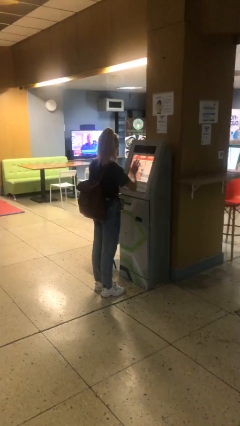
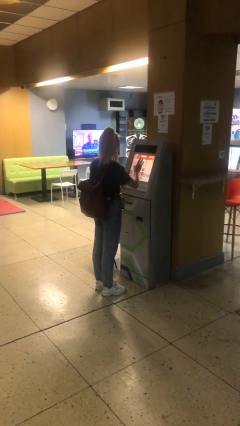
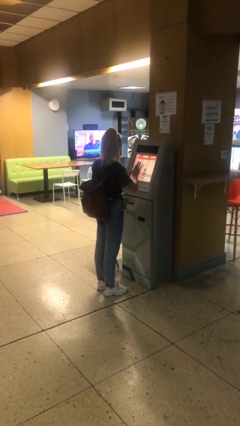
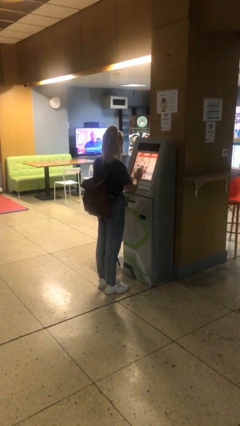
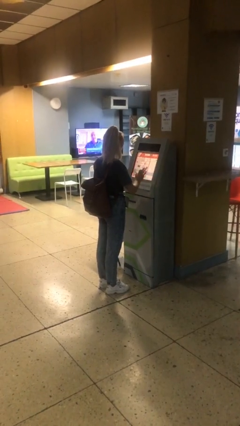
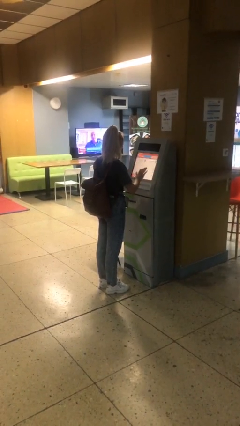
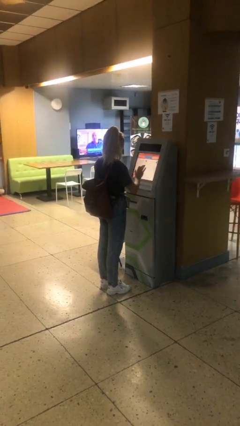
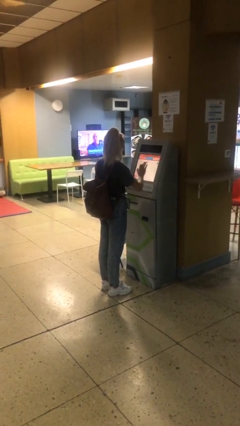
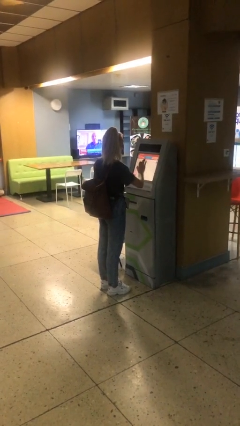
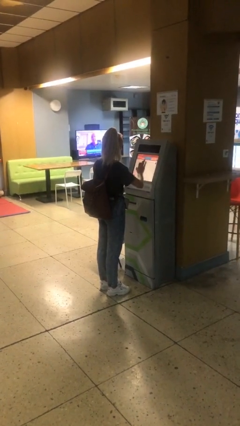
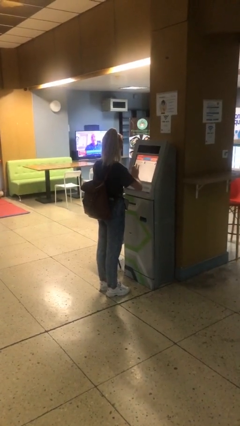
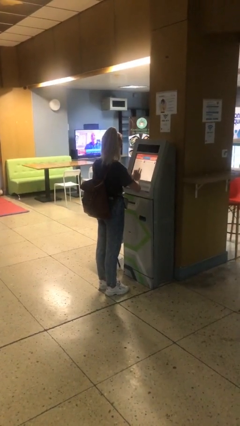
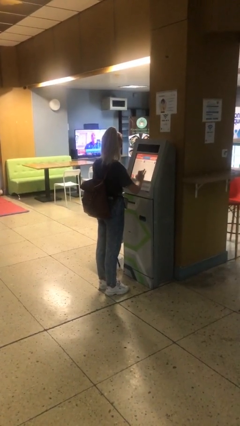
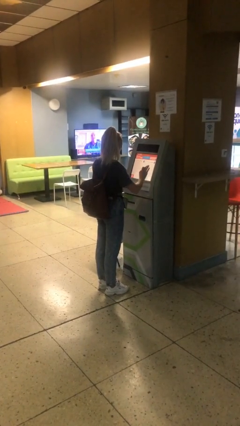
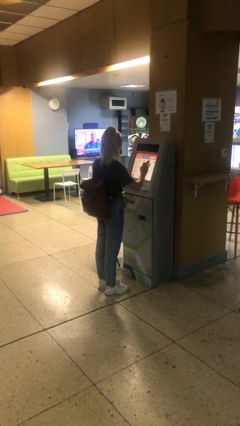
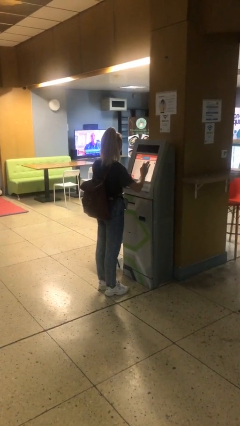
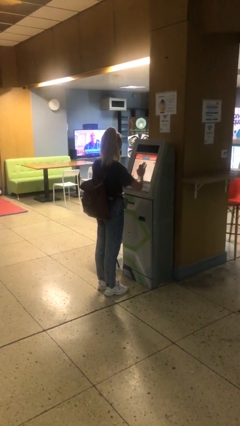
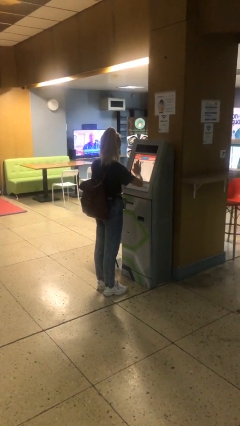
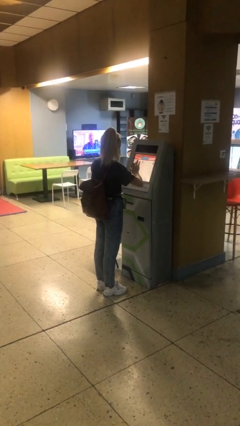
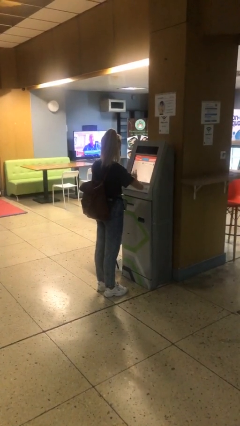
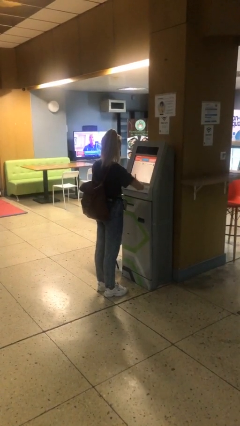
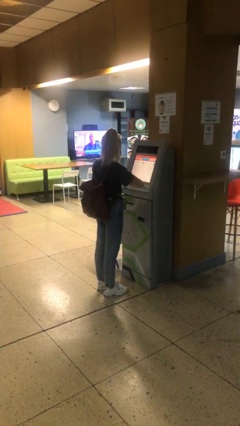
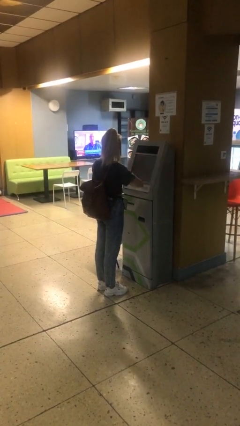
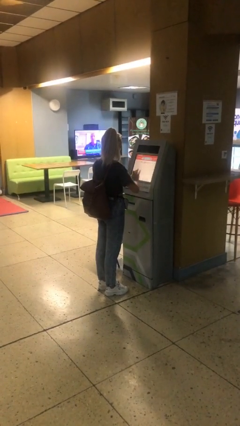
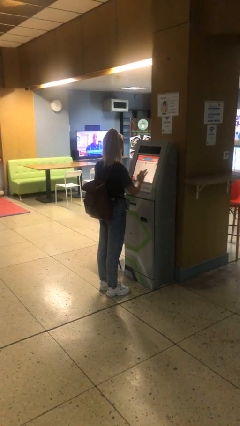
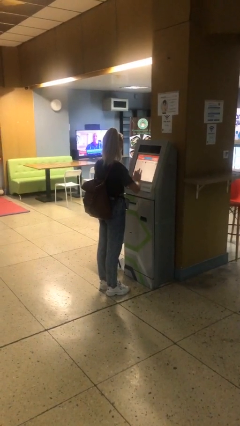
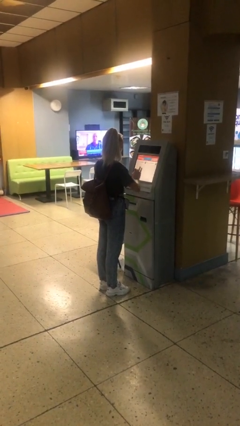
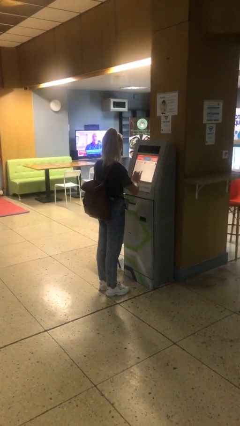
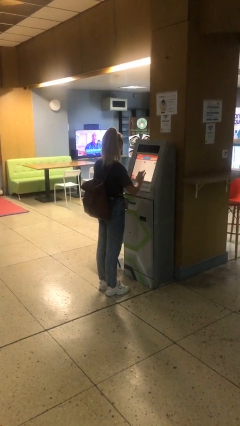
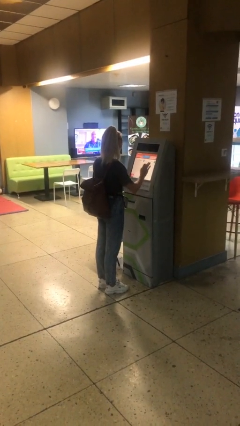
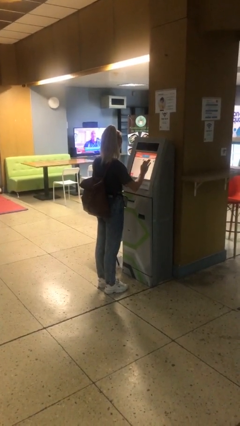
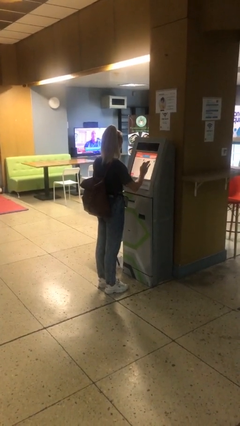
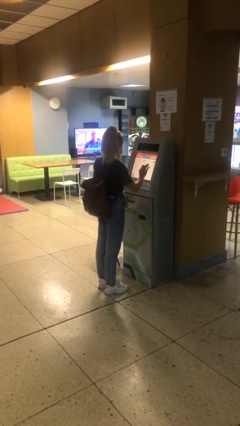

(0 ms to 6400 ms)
person purchases from machine

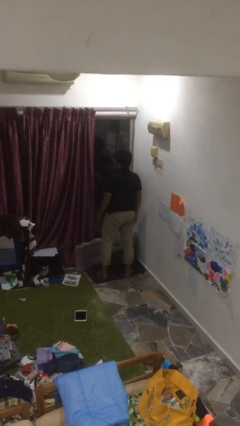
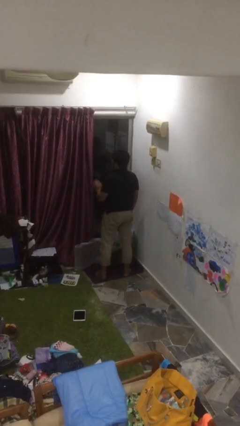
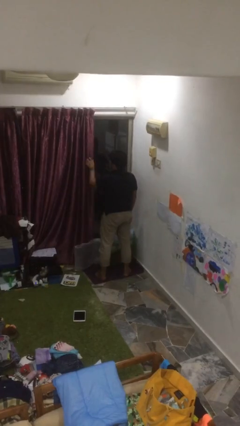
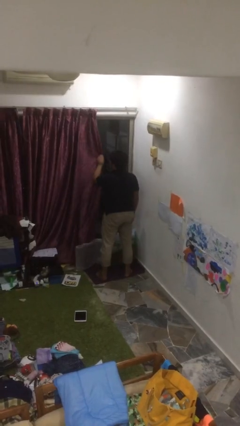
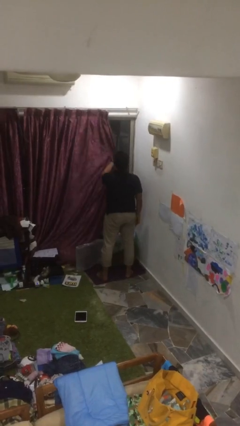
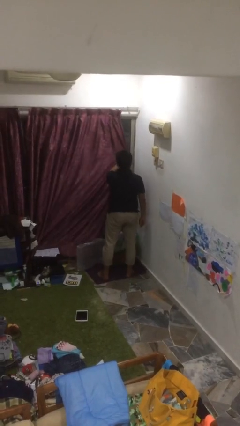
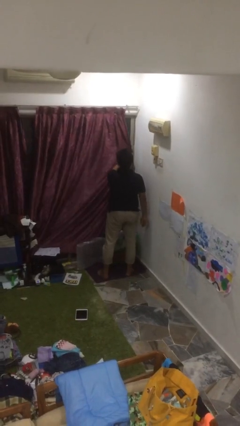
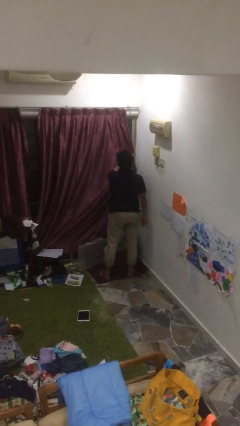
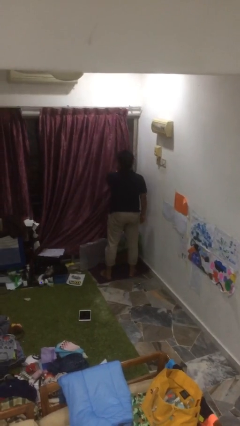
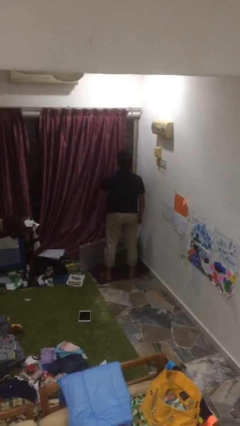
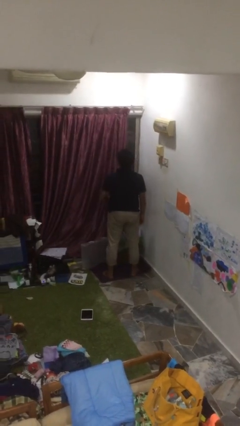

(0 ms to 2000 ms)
person closes curtains

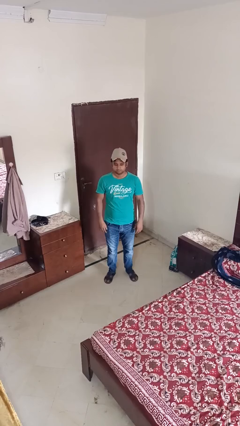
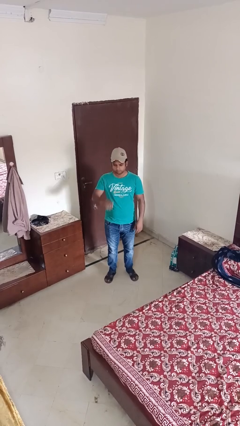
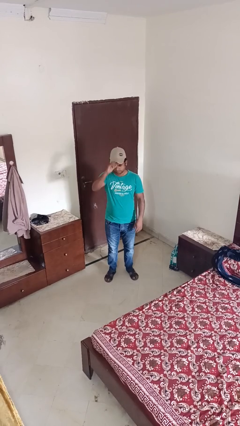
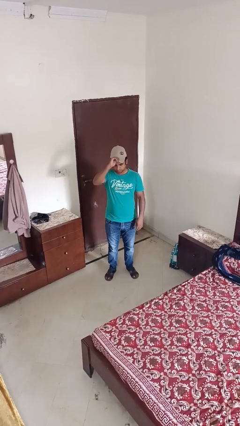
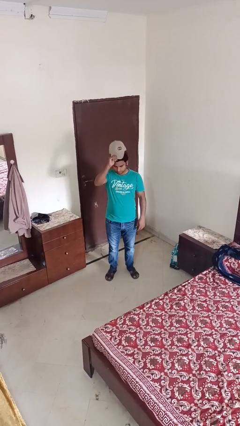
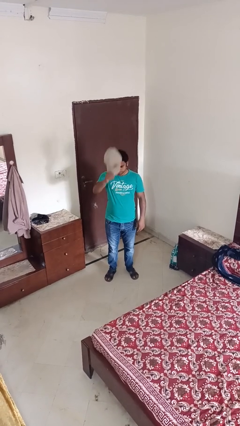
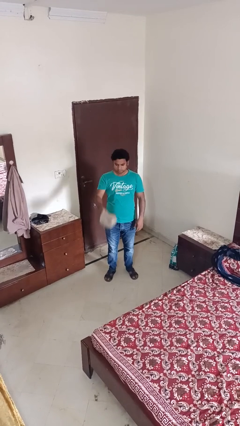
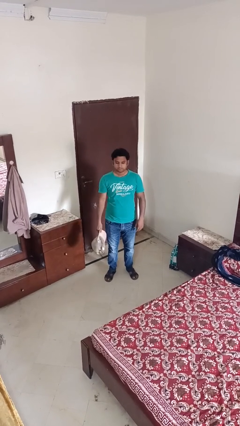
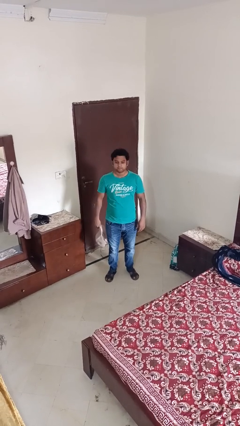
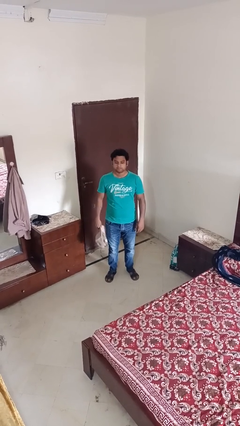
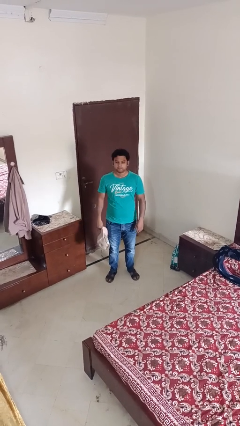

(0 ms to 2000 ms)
person takes off hat

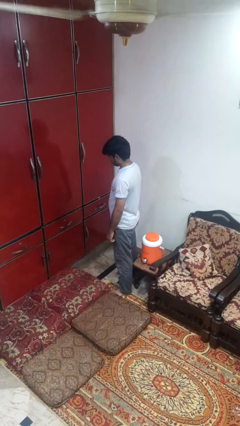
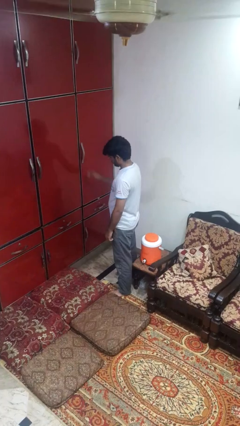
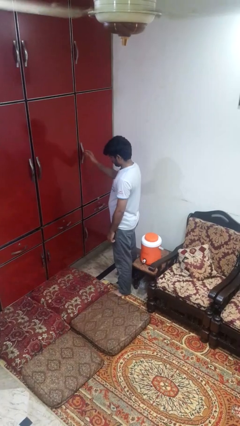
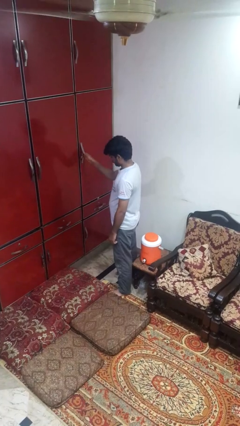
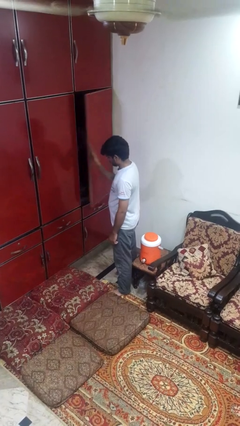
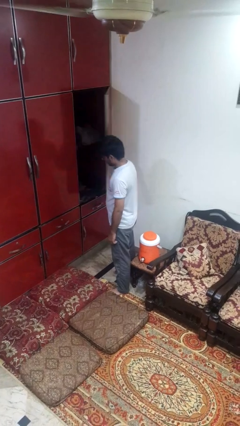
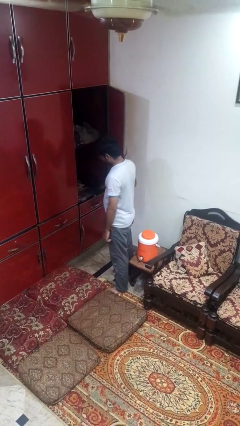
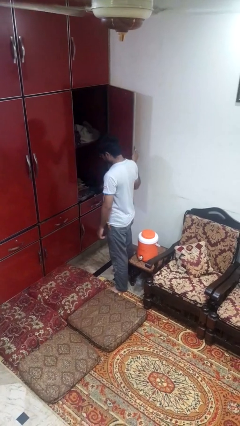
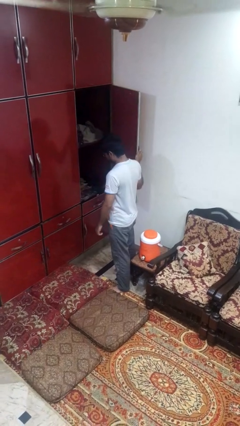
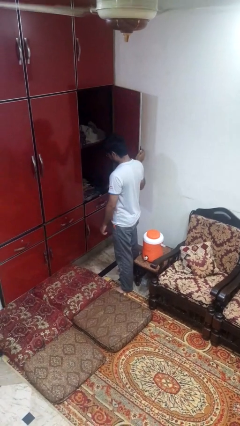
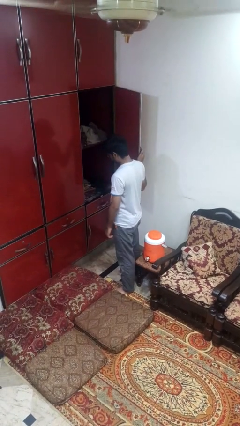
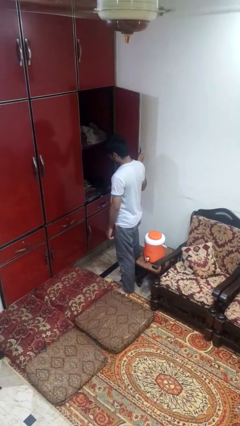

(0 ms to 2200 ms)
person closes cabinet

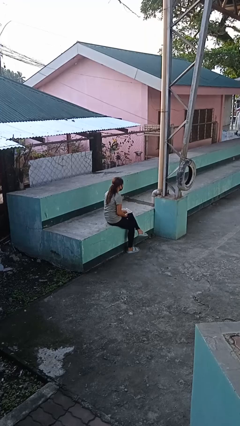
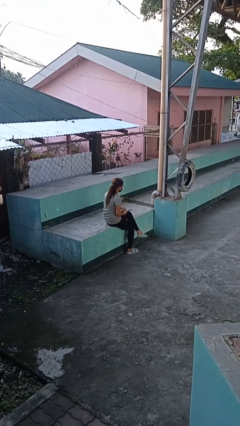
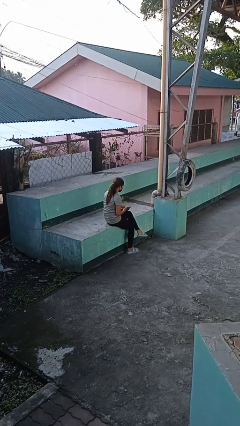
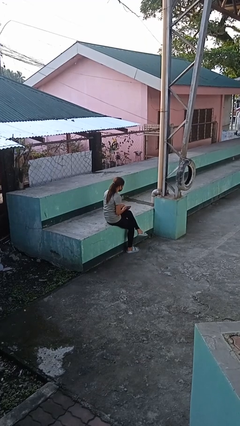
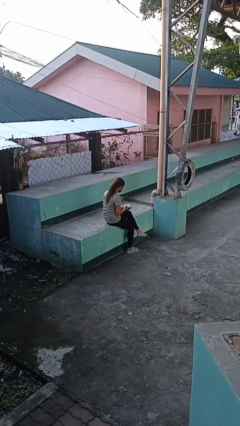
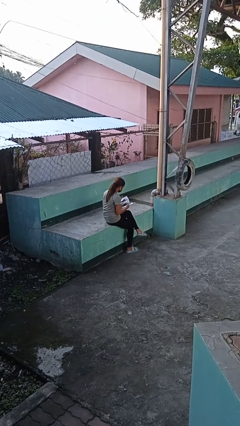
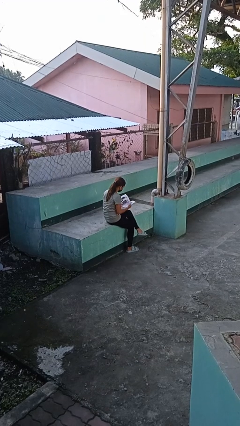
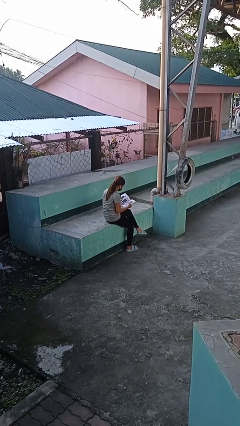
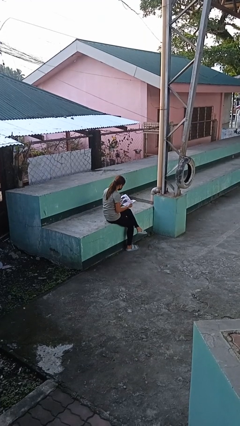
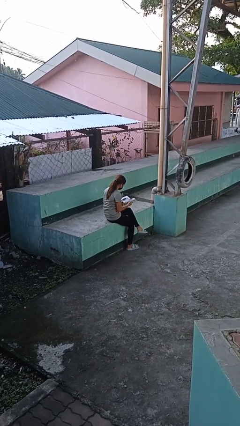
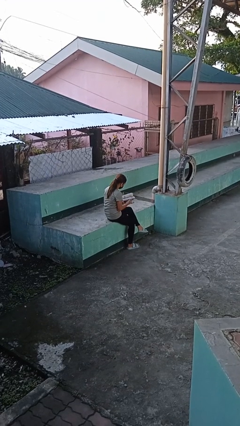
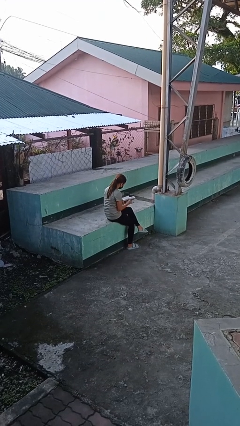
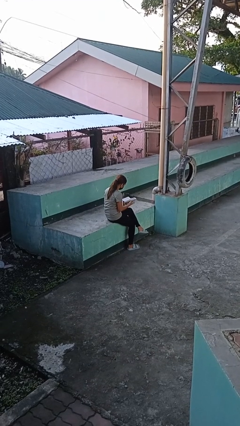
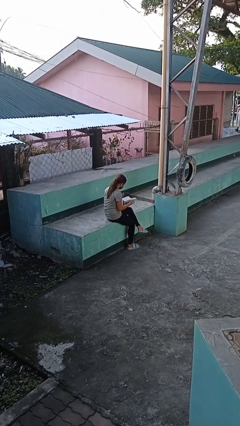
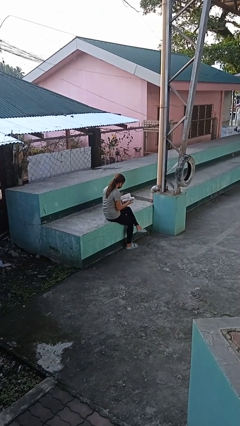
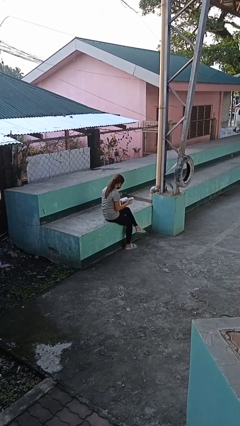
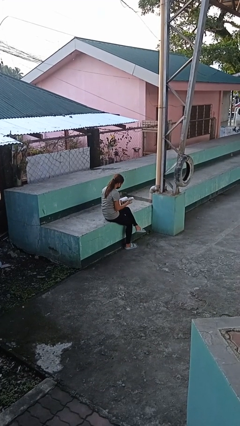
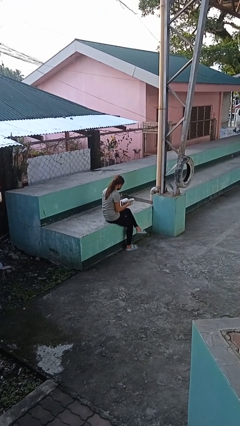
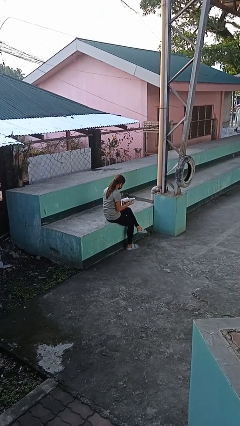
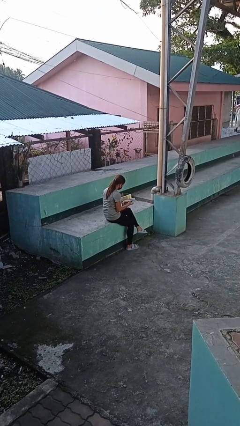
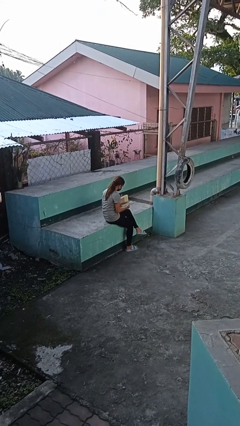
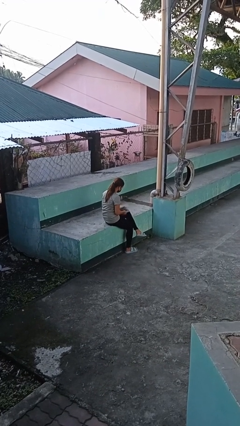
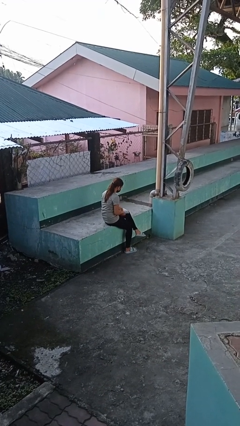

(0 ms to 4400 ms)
person reads magazine

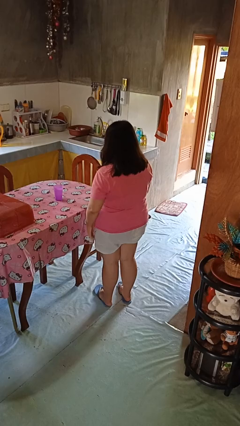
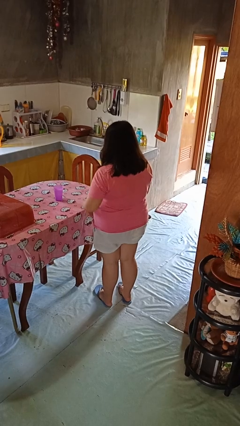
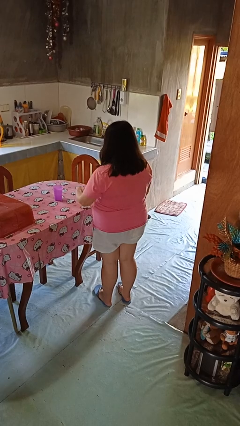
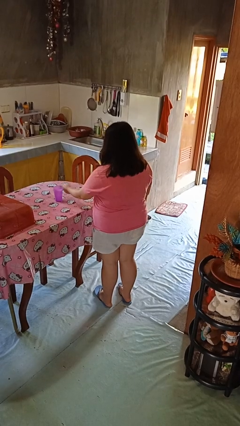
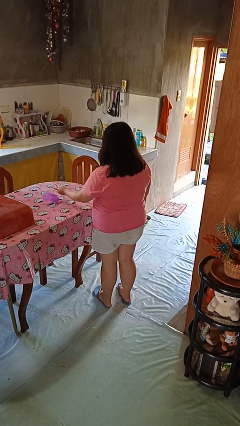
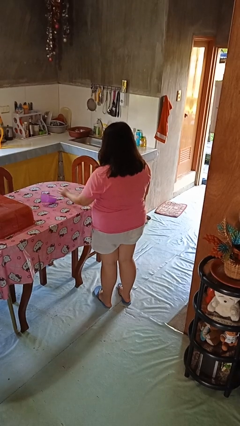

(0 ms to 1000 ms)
person knocks over glass
